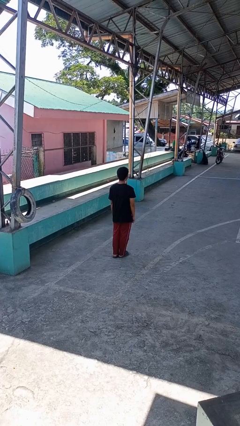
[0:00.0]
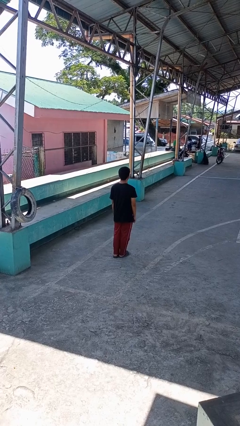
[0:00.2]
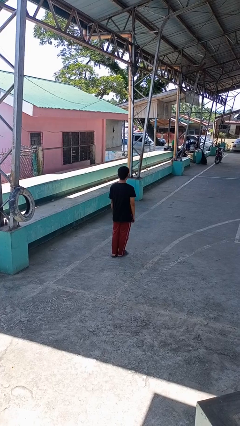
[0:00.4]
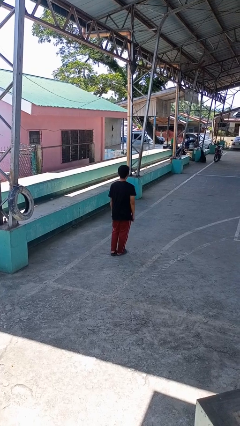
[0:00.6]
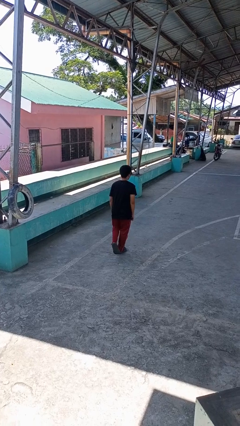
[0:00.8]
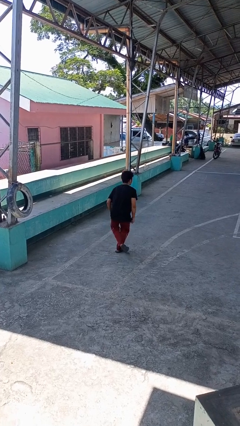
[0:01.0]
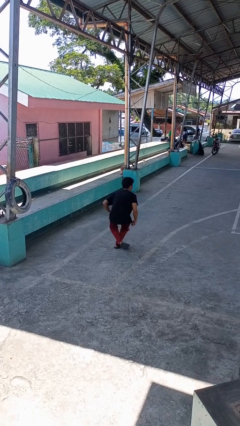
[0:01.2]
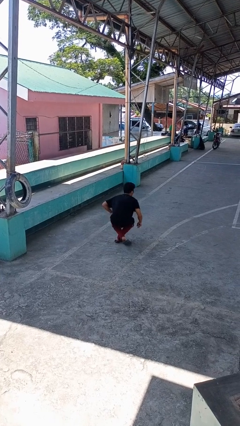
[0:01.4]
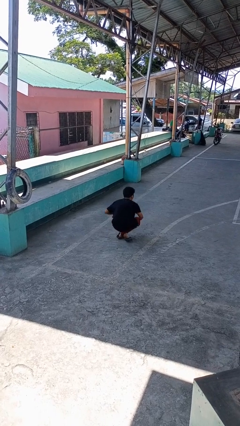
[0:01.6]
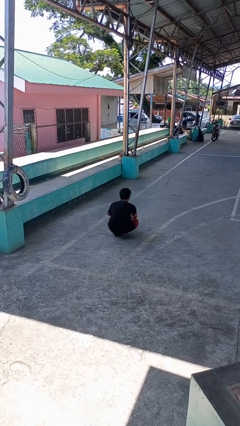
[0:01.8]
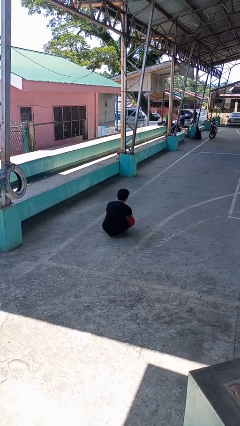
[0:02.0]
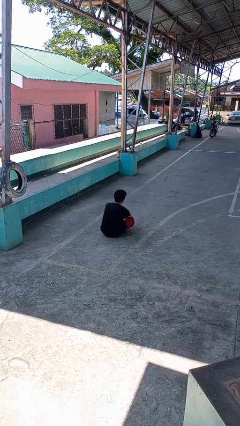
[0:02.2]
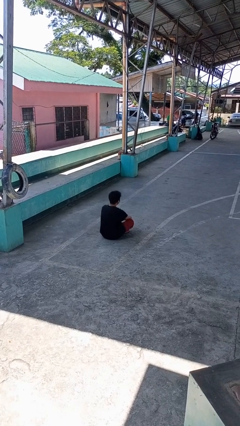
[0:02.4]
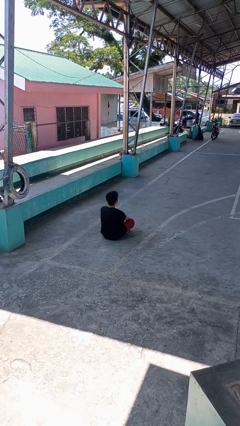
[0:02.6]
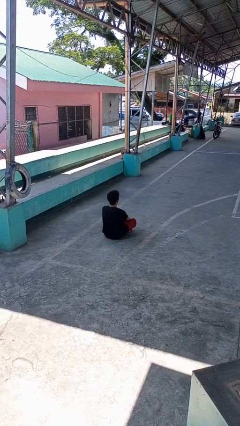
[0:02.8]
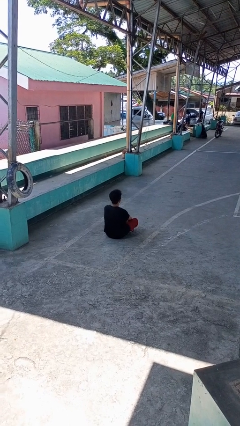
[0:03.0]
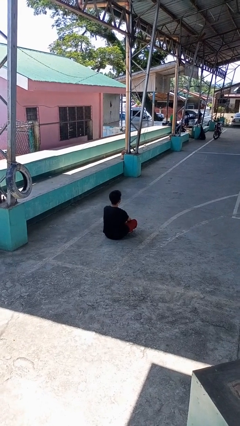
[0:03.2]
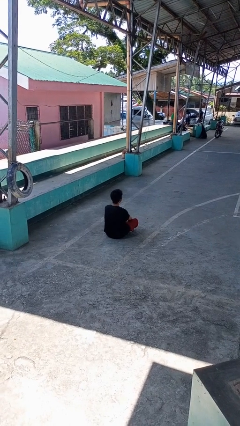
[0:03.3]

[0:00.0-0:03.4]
person sits crisscross

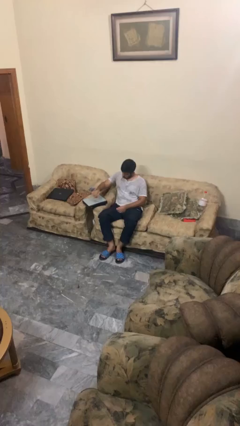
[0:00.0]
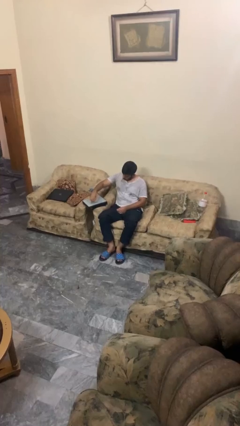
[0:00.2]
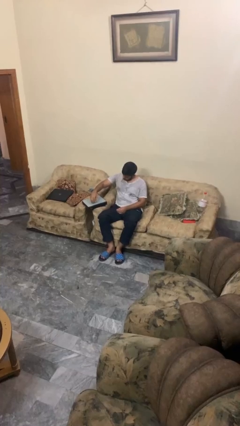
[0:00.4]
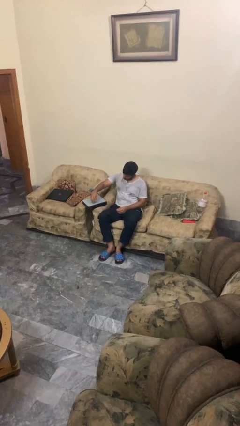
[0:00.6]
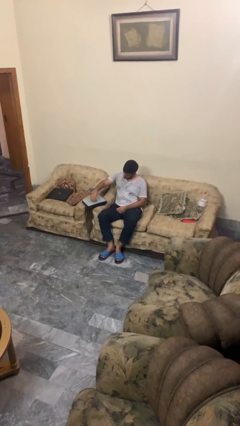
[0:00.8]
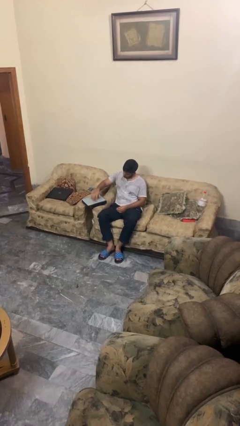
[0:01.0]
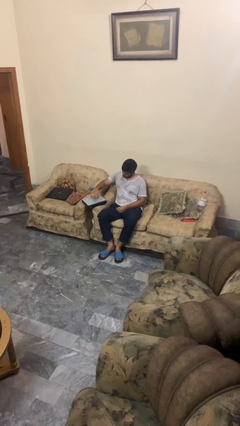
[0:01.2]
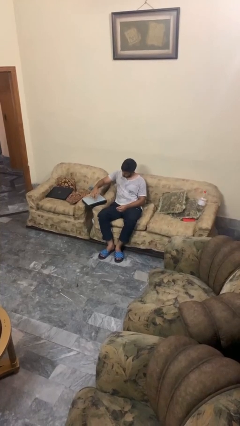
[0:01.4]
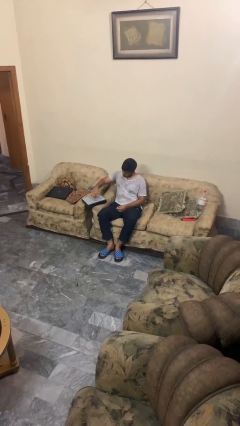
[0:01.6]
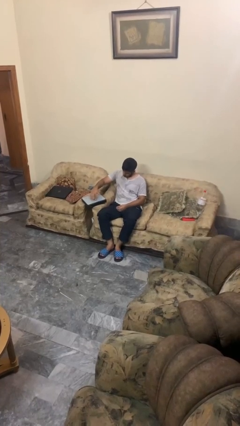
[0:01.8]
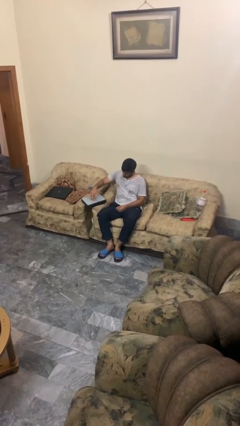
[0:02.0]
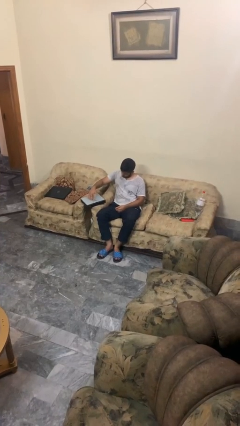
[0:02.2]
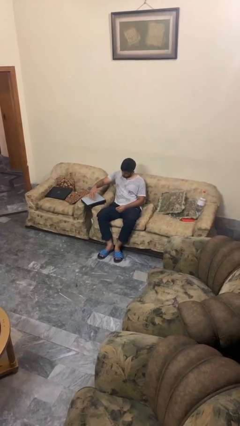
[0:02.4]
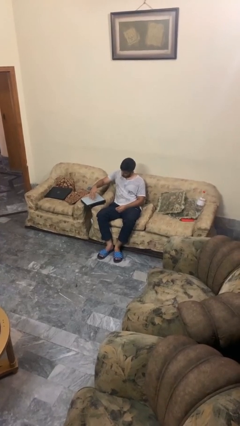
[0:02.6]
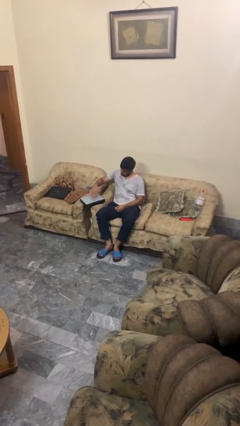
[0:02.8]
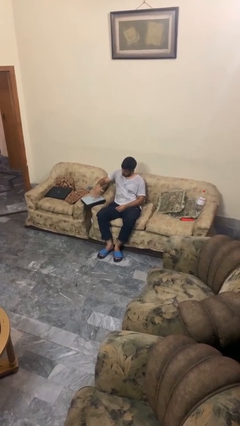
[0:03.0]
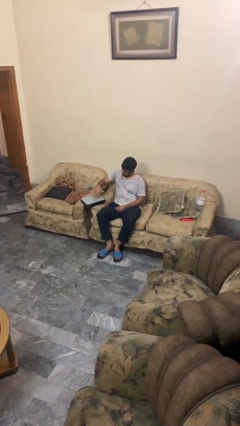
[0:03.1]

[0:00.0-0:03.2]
person taps object with finger

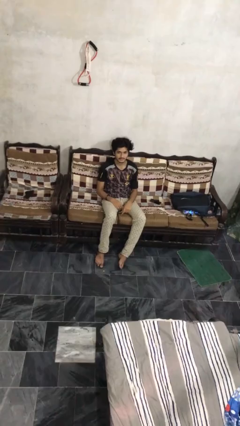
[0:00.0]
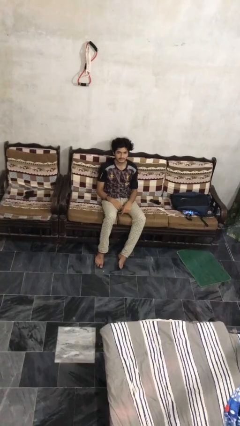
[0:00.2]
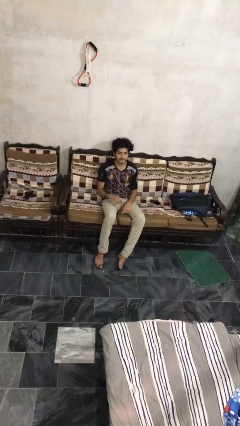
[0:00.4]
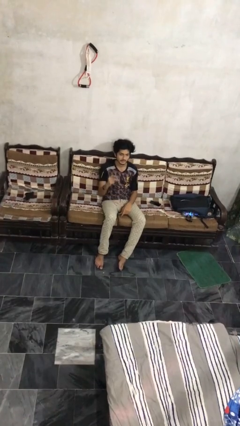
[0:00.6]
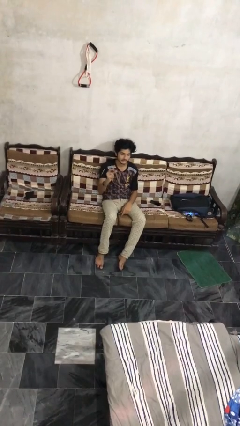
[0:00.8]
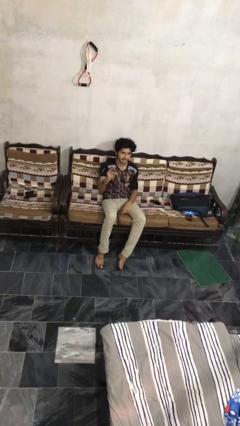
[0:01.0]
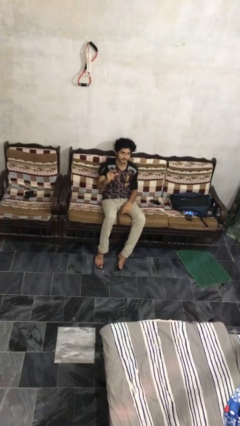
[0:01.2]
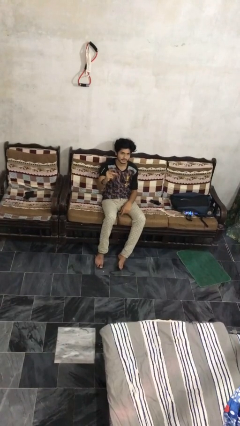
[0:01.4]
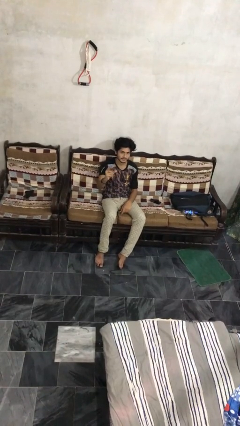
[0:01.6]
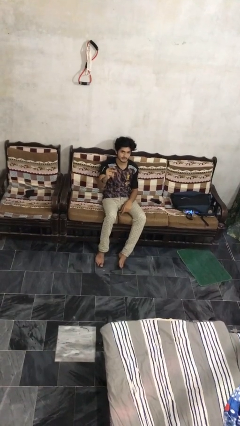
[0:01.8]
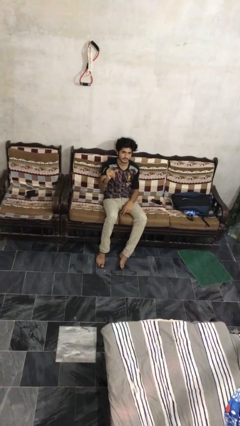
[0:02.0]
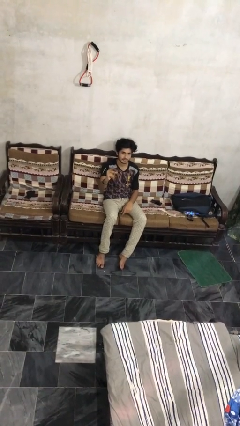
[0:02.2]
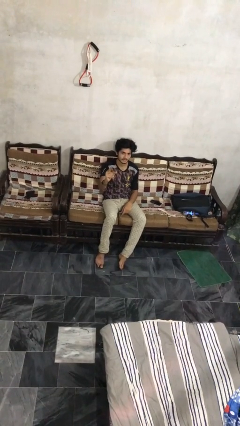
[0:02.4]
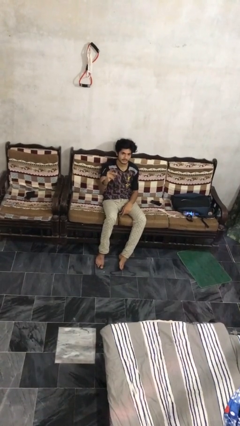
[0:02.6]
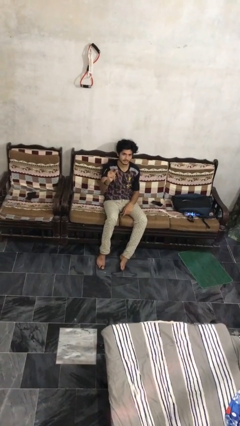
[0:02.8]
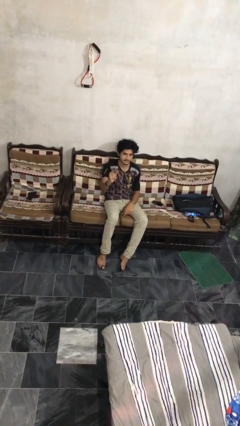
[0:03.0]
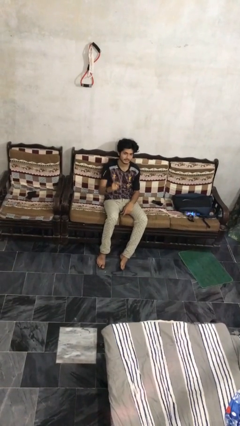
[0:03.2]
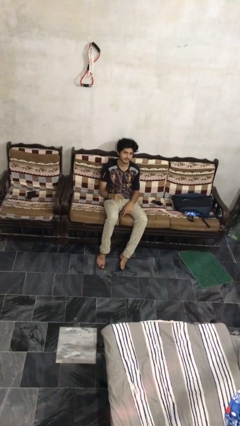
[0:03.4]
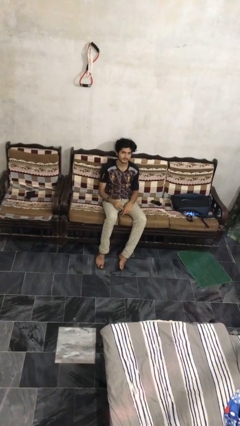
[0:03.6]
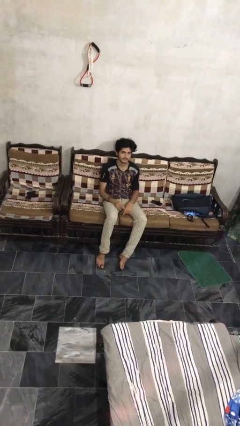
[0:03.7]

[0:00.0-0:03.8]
person snaps fingers

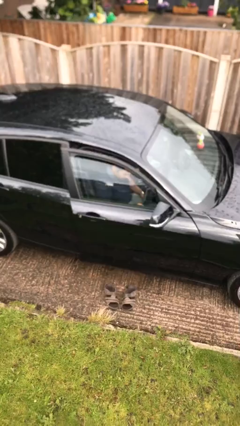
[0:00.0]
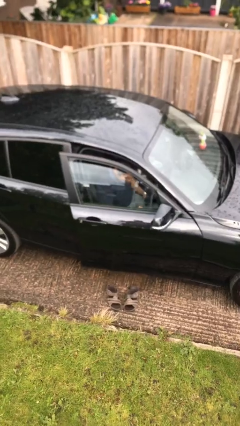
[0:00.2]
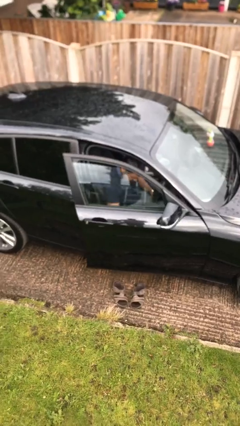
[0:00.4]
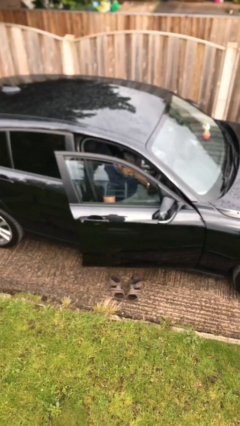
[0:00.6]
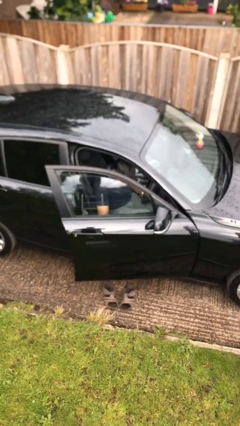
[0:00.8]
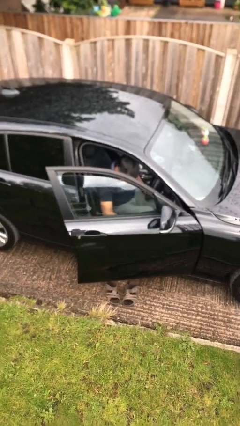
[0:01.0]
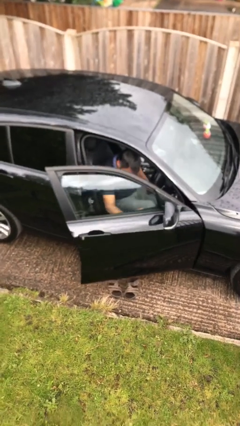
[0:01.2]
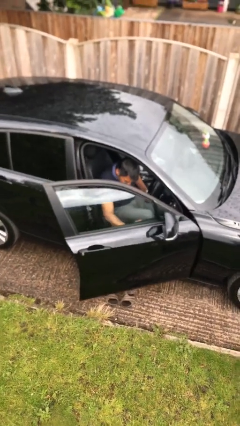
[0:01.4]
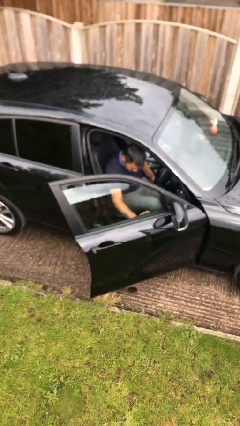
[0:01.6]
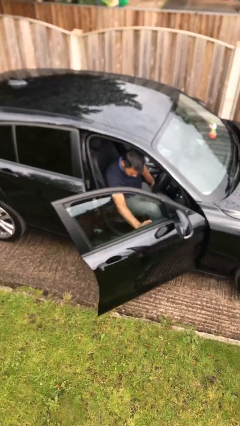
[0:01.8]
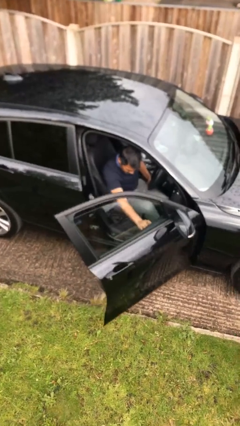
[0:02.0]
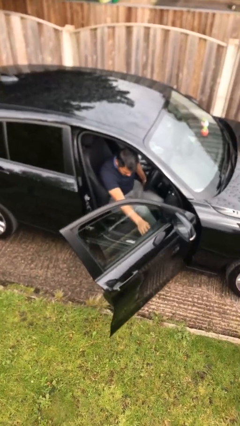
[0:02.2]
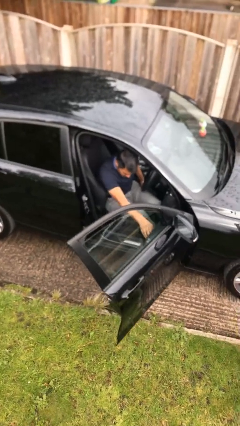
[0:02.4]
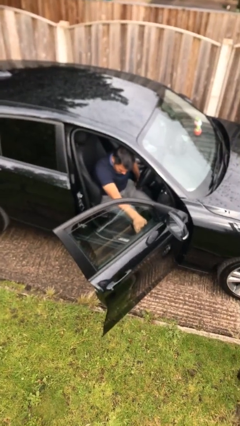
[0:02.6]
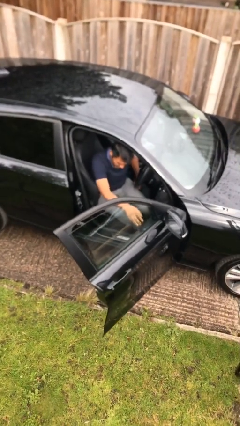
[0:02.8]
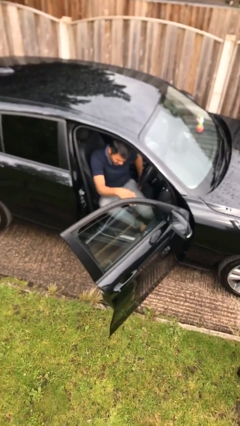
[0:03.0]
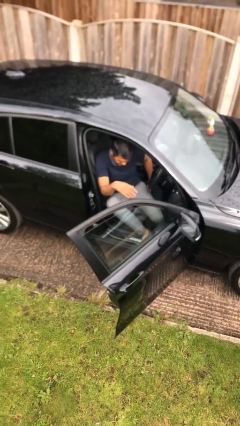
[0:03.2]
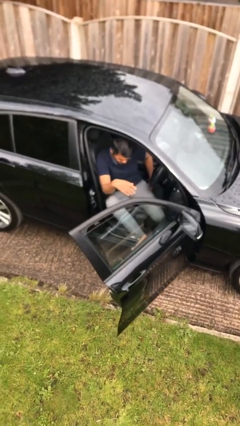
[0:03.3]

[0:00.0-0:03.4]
person opens car door

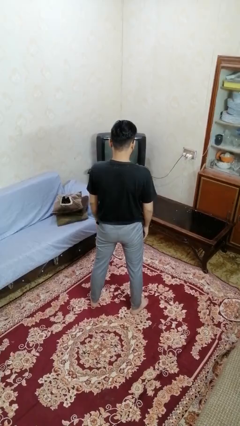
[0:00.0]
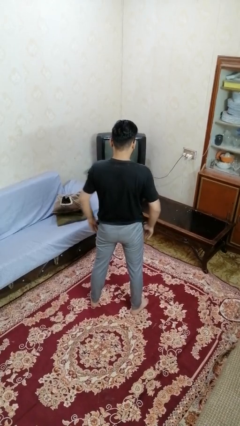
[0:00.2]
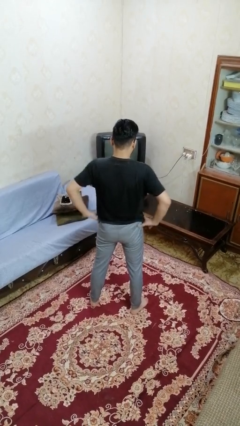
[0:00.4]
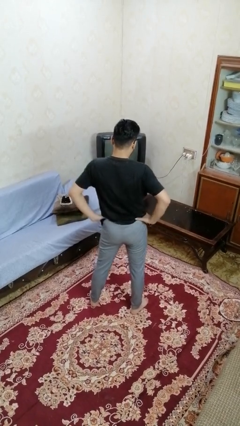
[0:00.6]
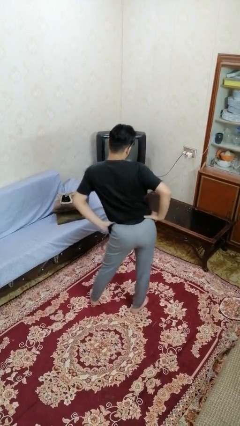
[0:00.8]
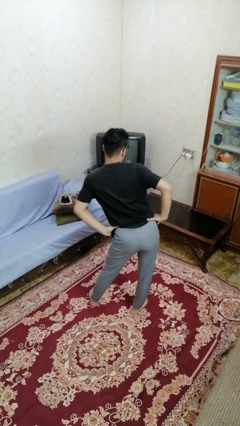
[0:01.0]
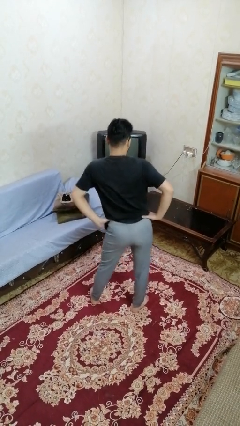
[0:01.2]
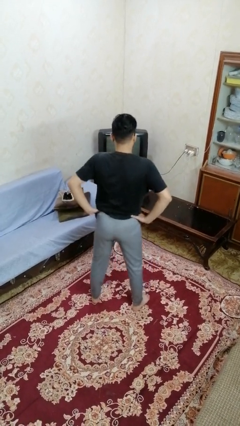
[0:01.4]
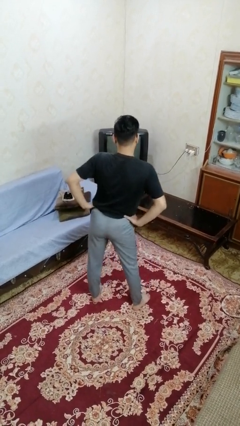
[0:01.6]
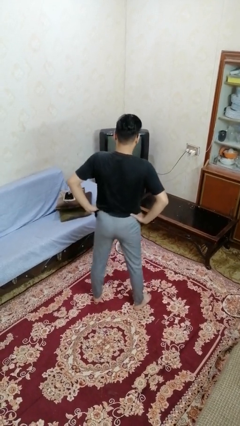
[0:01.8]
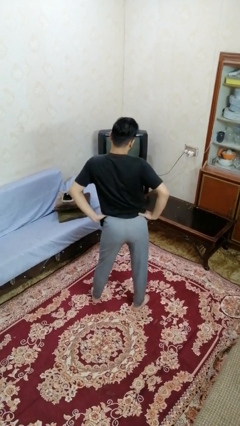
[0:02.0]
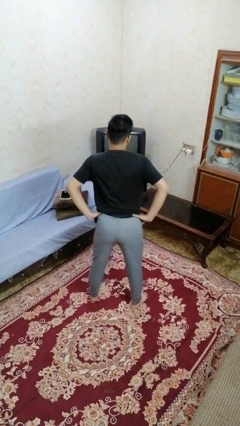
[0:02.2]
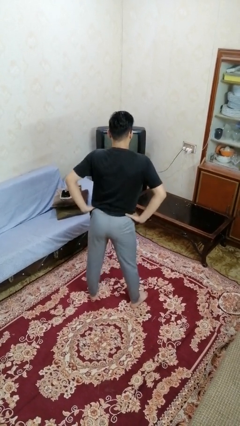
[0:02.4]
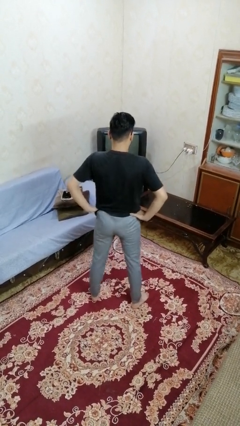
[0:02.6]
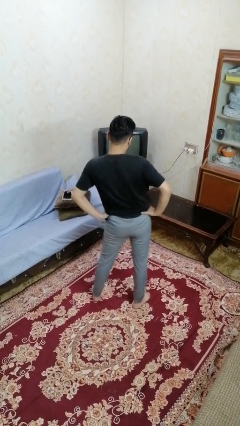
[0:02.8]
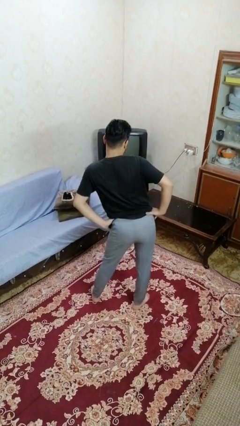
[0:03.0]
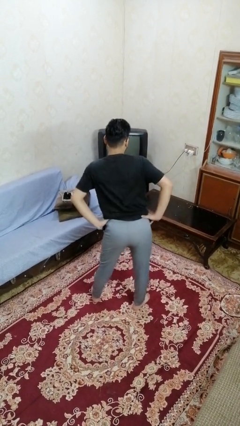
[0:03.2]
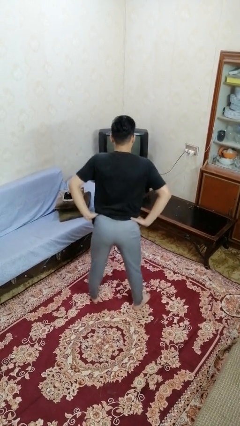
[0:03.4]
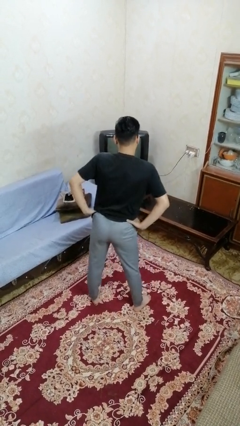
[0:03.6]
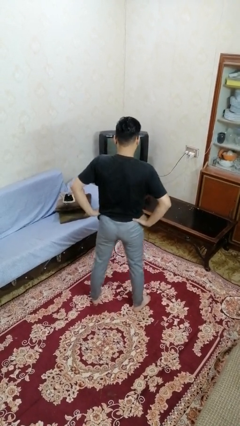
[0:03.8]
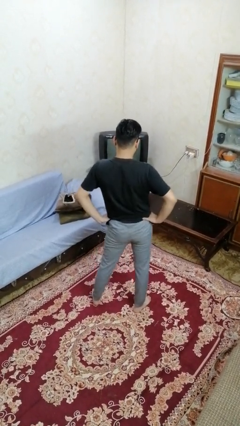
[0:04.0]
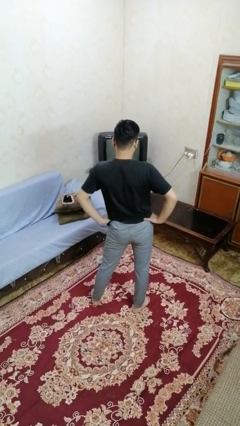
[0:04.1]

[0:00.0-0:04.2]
person wiggles hips
